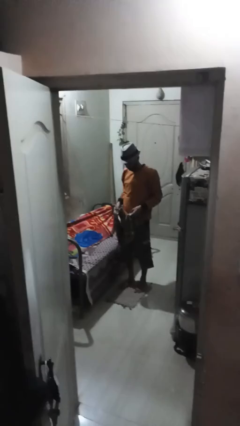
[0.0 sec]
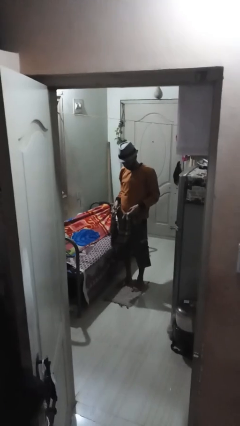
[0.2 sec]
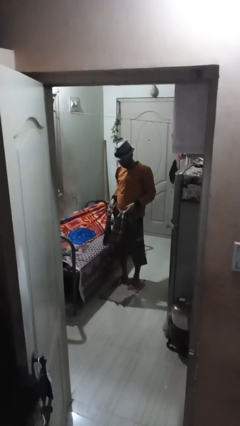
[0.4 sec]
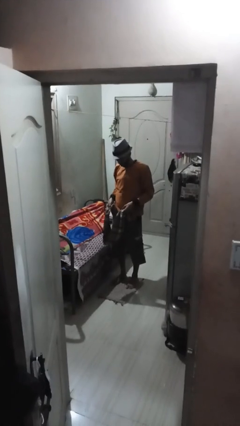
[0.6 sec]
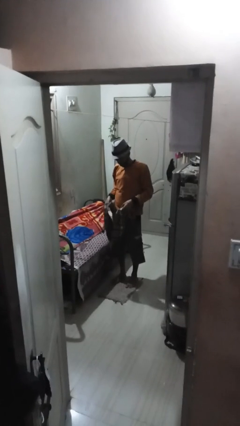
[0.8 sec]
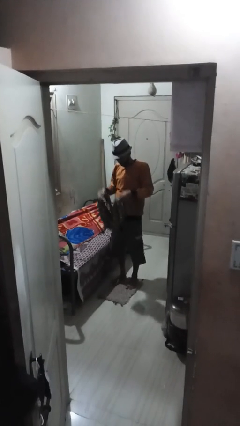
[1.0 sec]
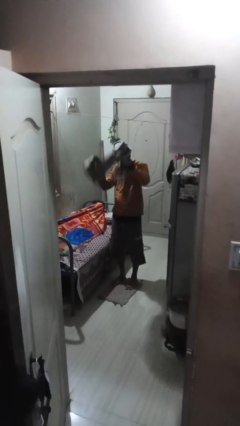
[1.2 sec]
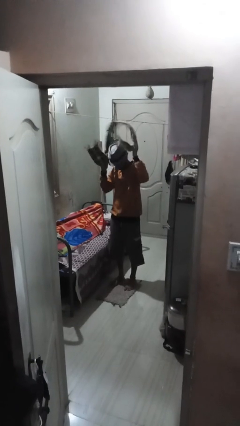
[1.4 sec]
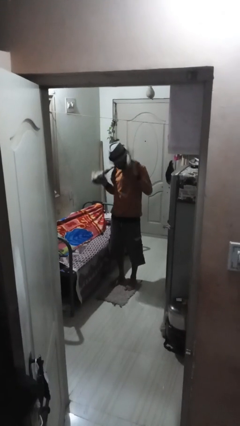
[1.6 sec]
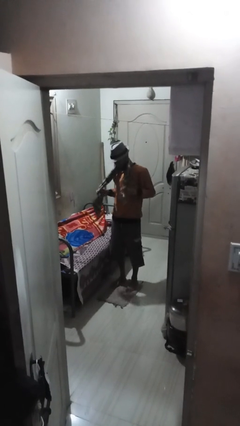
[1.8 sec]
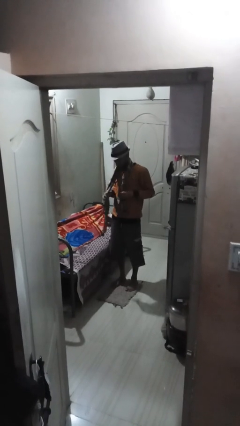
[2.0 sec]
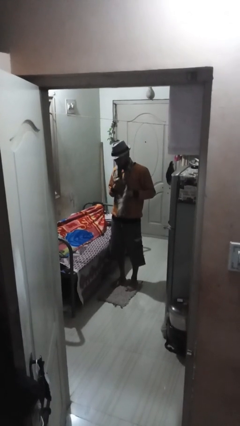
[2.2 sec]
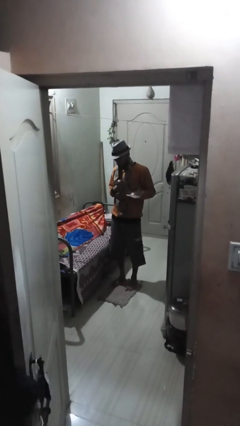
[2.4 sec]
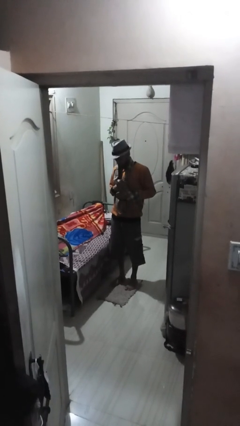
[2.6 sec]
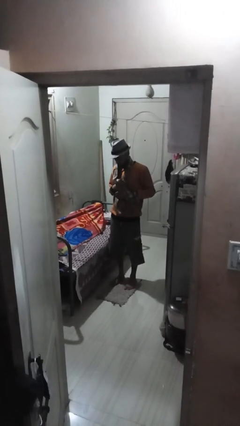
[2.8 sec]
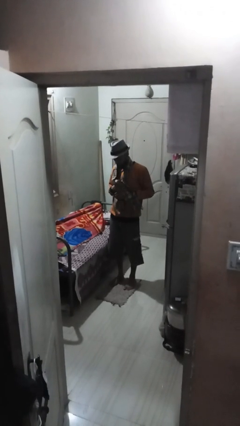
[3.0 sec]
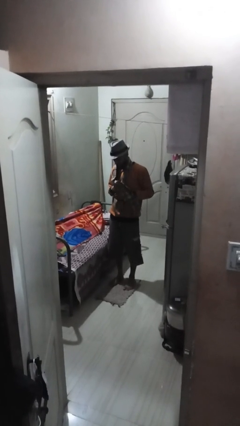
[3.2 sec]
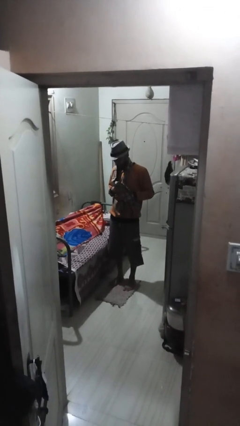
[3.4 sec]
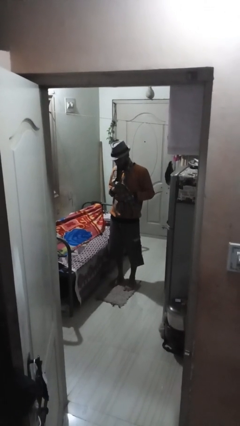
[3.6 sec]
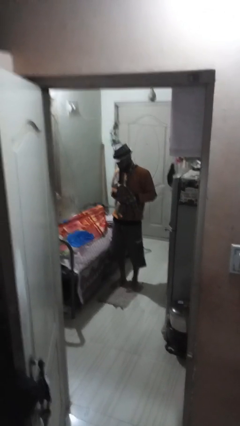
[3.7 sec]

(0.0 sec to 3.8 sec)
person puts on scarf

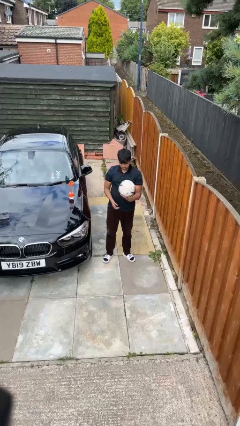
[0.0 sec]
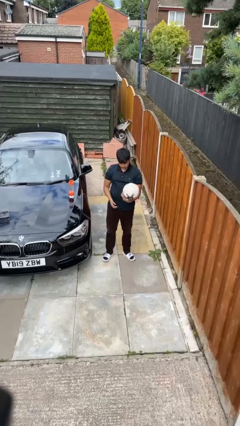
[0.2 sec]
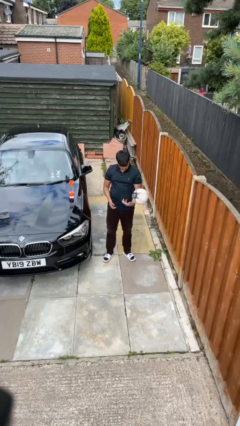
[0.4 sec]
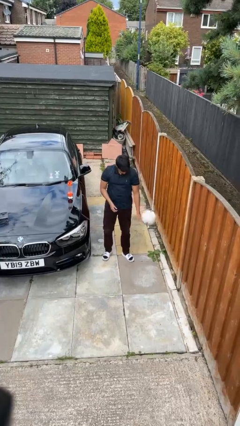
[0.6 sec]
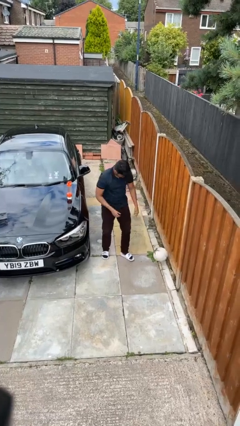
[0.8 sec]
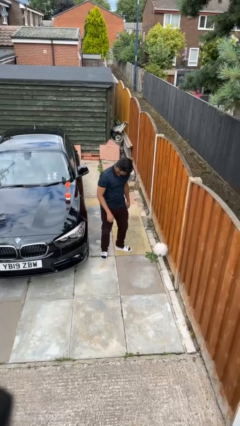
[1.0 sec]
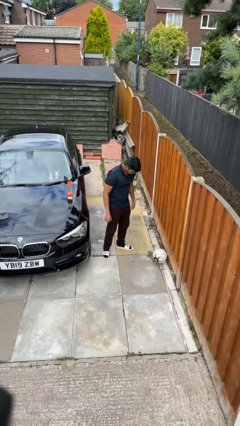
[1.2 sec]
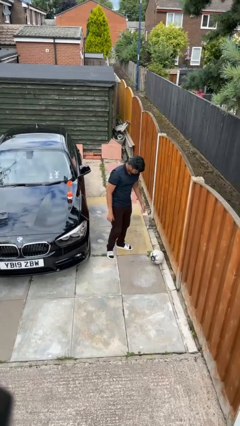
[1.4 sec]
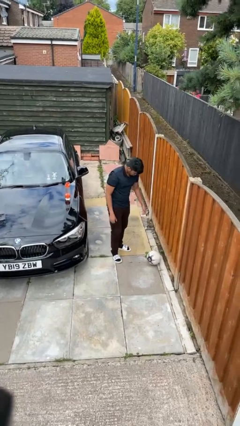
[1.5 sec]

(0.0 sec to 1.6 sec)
person drops object

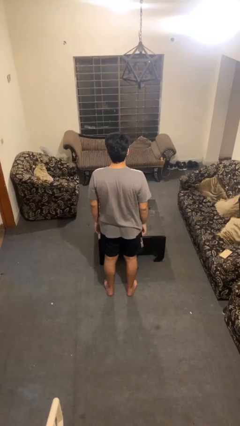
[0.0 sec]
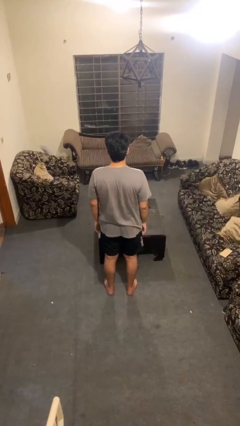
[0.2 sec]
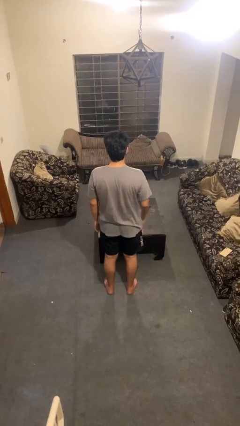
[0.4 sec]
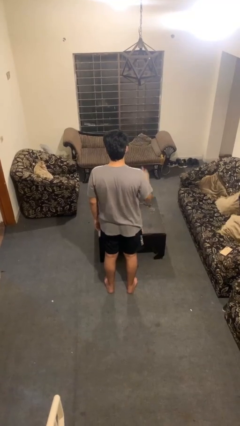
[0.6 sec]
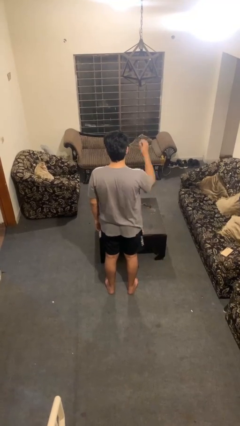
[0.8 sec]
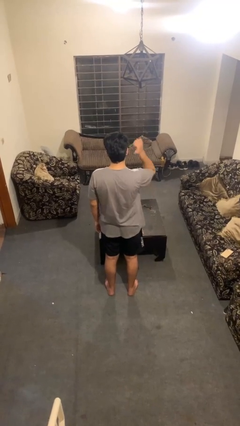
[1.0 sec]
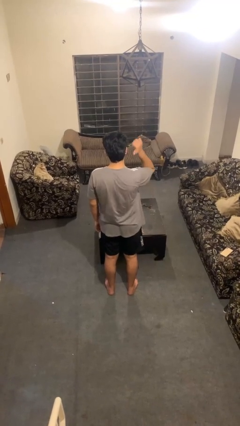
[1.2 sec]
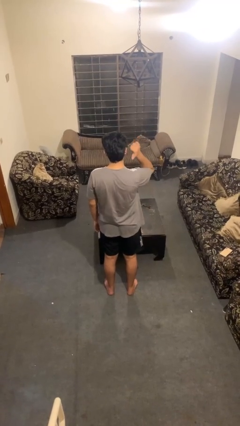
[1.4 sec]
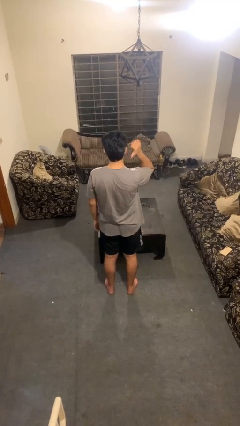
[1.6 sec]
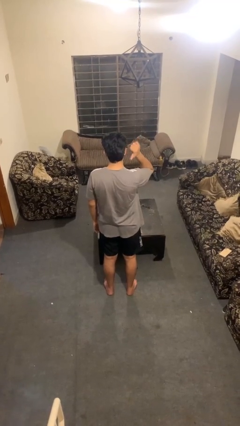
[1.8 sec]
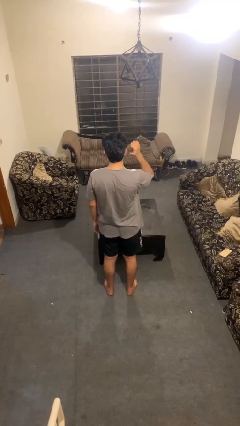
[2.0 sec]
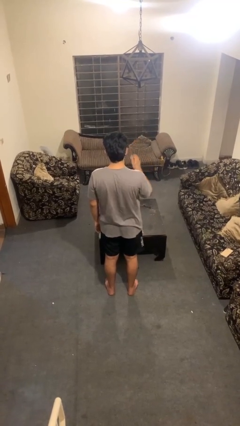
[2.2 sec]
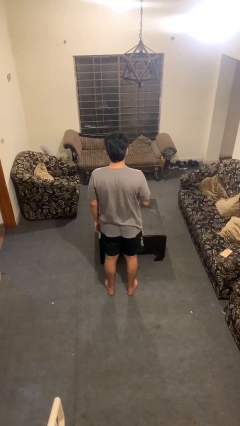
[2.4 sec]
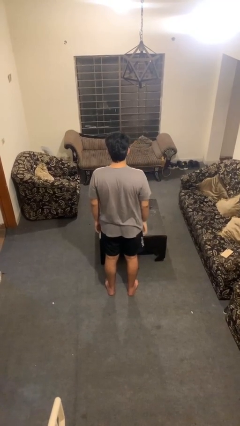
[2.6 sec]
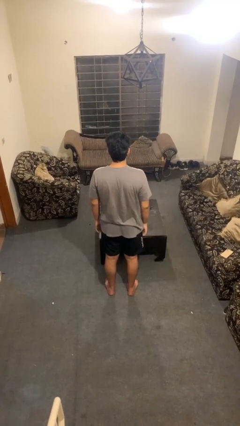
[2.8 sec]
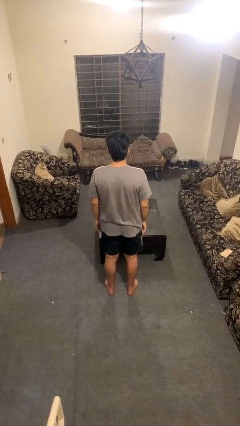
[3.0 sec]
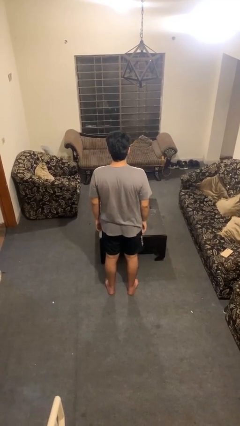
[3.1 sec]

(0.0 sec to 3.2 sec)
person gestures behind me

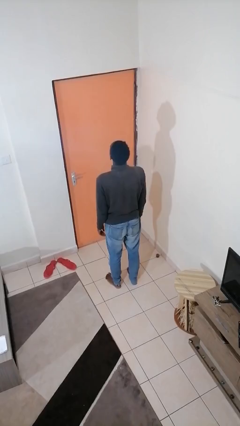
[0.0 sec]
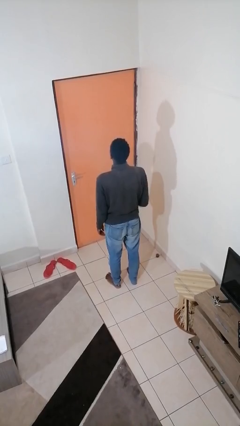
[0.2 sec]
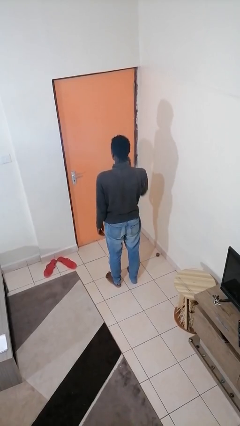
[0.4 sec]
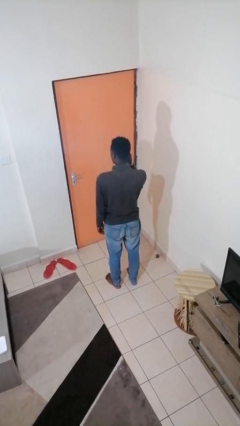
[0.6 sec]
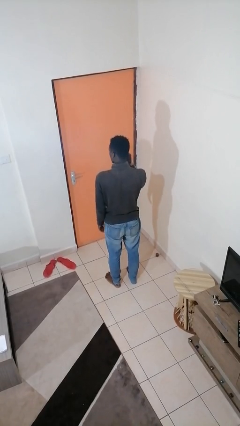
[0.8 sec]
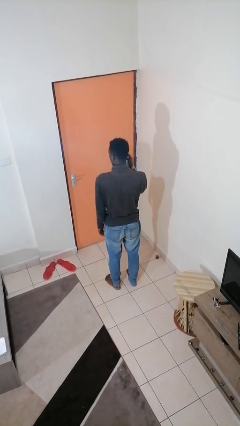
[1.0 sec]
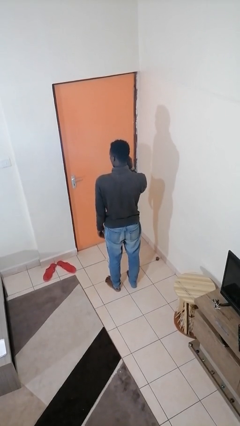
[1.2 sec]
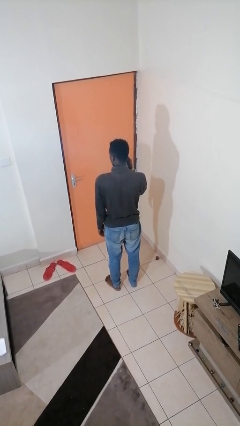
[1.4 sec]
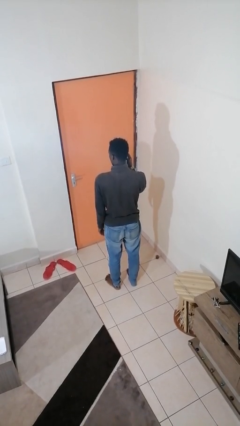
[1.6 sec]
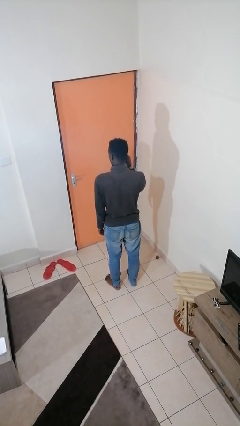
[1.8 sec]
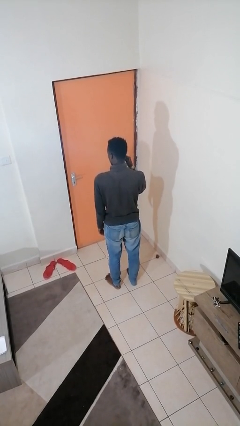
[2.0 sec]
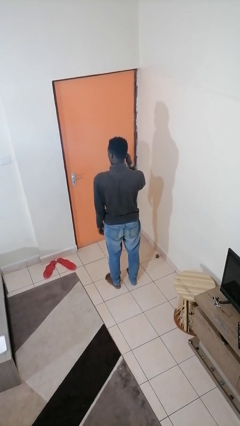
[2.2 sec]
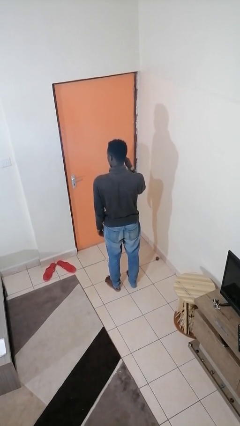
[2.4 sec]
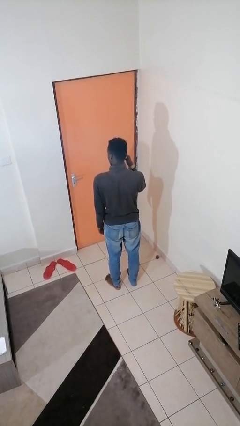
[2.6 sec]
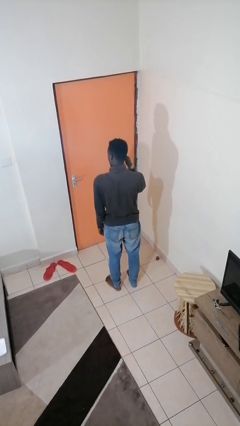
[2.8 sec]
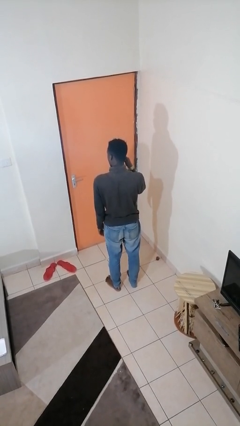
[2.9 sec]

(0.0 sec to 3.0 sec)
person touches earlobe

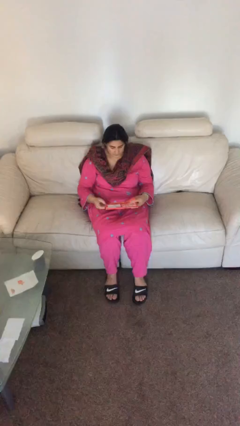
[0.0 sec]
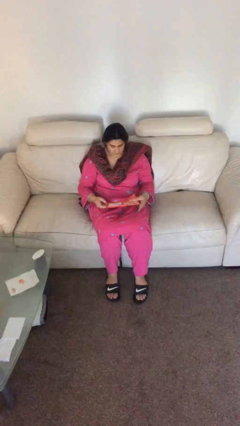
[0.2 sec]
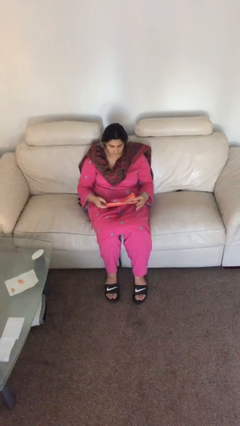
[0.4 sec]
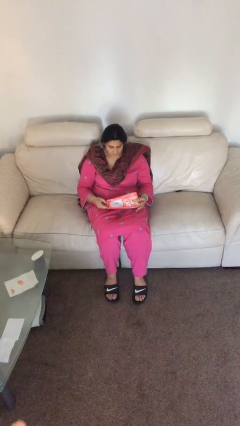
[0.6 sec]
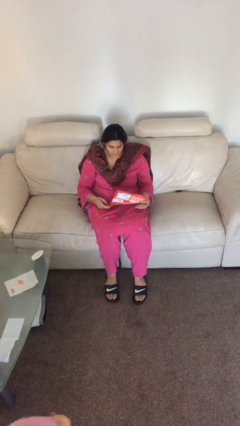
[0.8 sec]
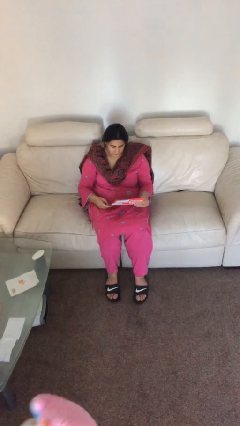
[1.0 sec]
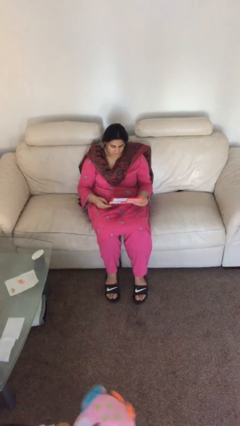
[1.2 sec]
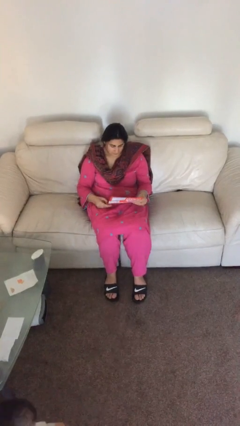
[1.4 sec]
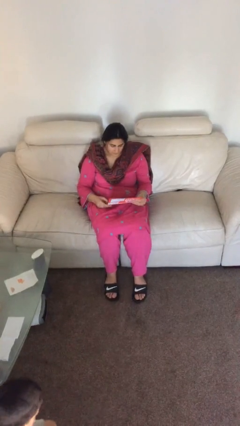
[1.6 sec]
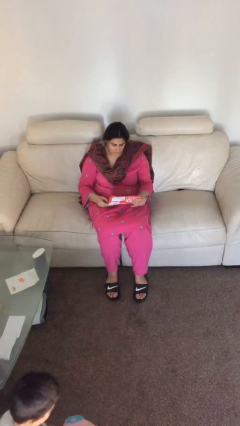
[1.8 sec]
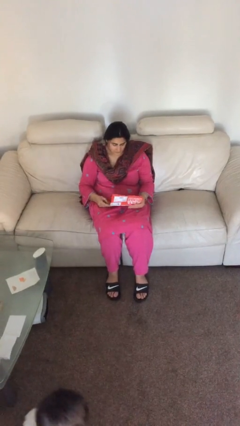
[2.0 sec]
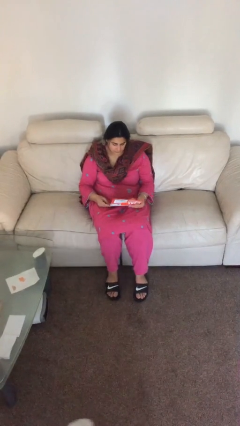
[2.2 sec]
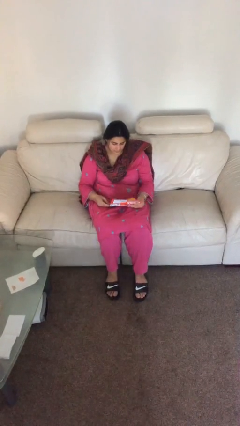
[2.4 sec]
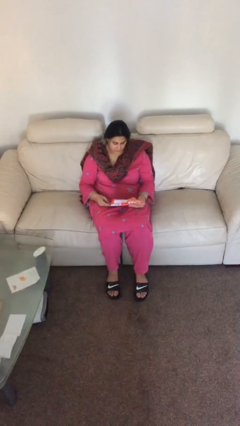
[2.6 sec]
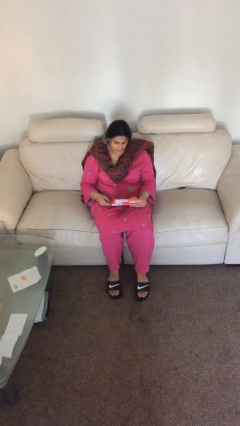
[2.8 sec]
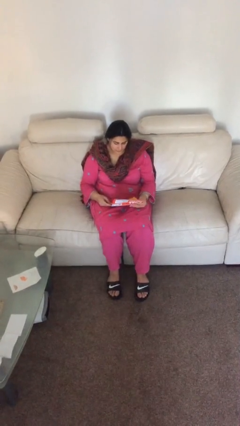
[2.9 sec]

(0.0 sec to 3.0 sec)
person reads document

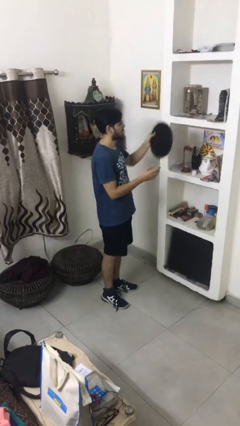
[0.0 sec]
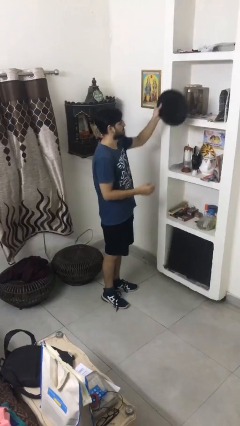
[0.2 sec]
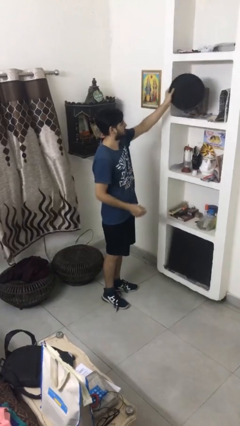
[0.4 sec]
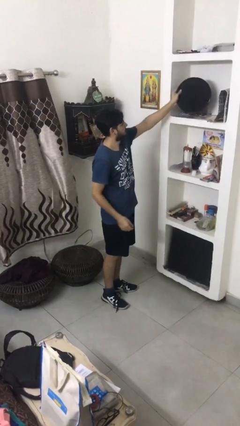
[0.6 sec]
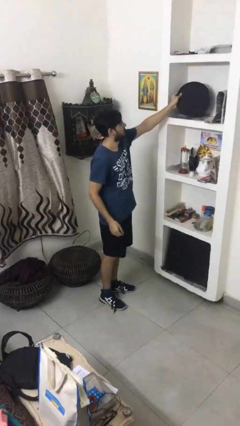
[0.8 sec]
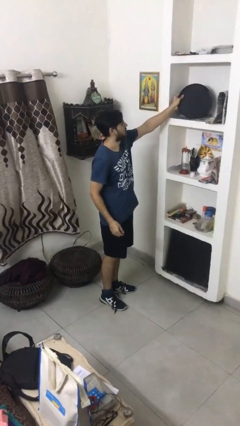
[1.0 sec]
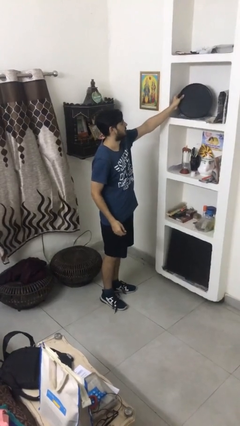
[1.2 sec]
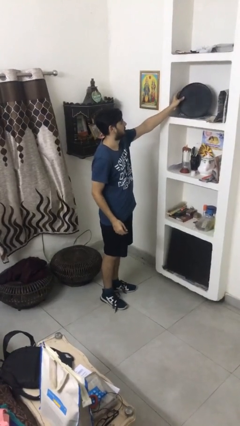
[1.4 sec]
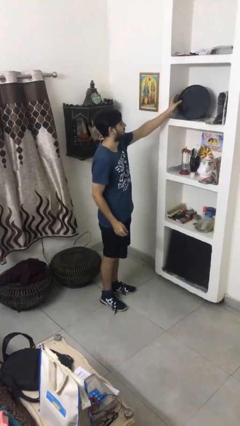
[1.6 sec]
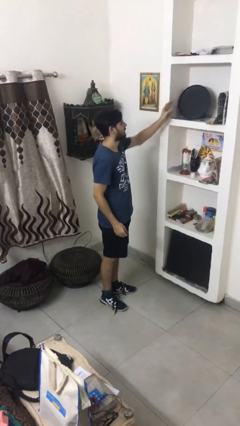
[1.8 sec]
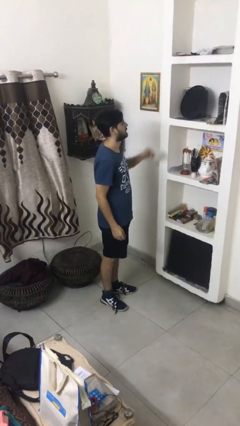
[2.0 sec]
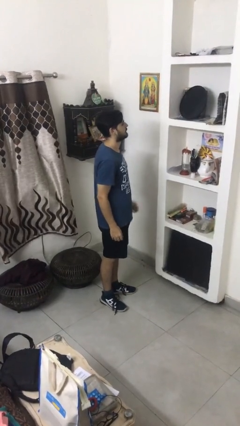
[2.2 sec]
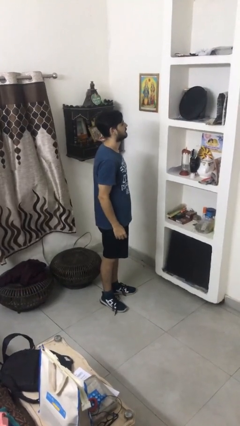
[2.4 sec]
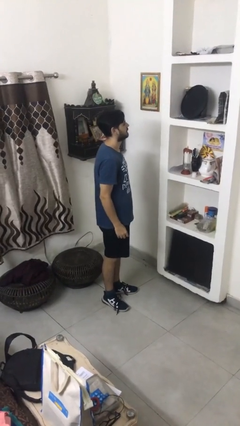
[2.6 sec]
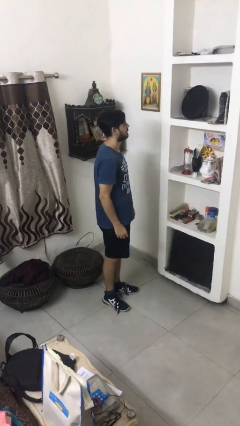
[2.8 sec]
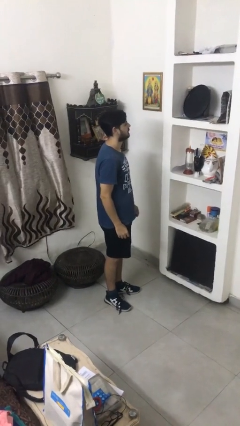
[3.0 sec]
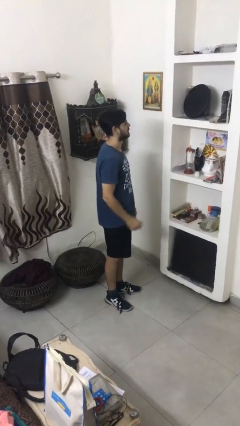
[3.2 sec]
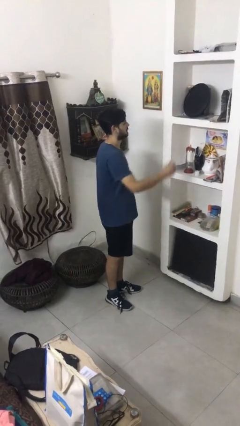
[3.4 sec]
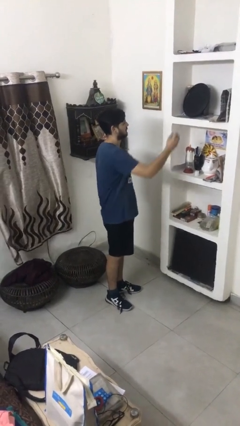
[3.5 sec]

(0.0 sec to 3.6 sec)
person puts down object on shelf
